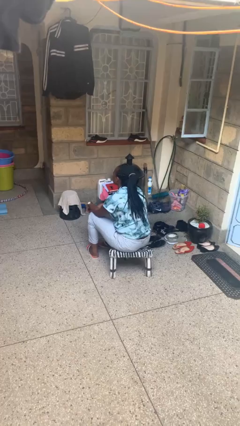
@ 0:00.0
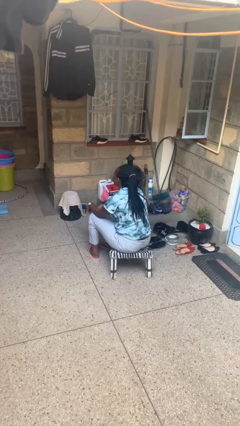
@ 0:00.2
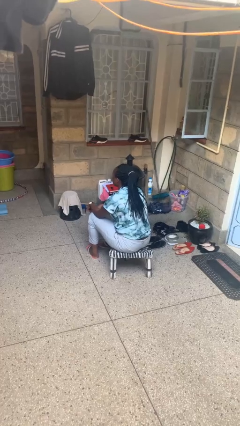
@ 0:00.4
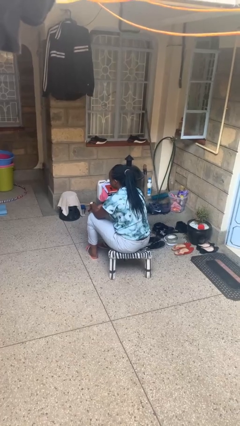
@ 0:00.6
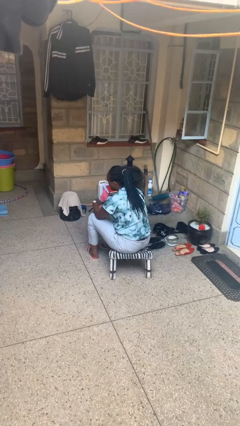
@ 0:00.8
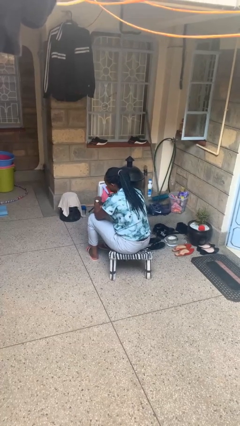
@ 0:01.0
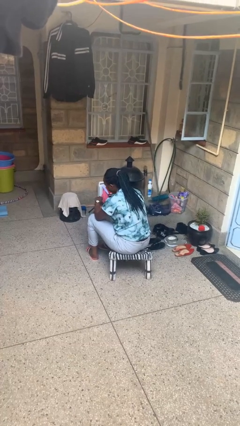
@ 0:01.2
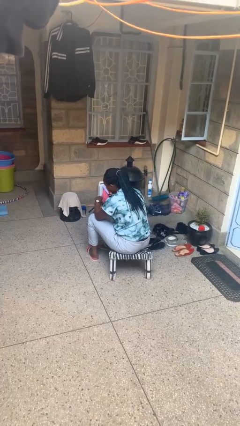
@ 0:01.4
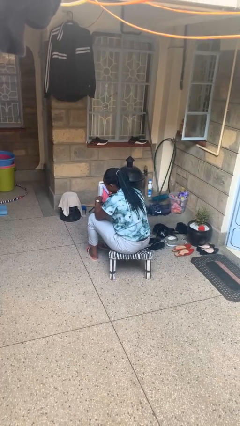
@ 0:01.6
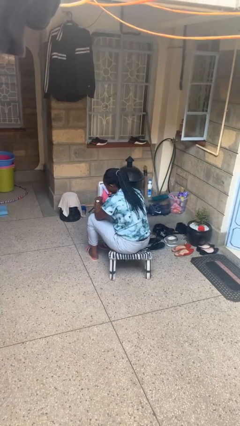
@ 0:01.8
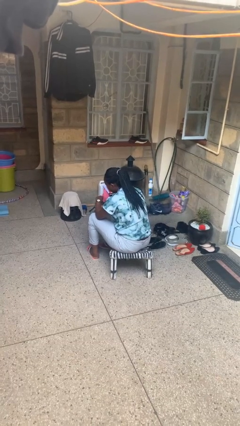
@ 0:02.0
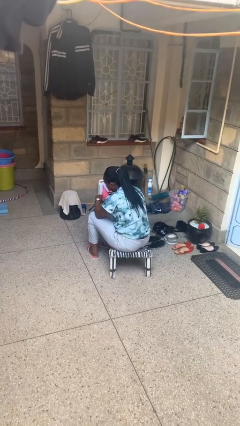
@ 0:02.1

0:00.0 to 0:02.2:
person looks at wristwatch

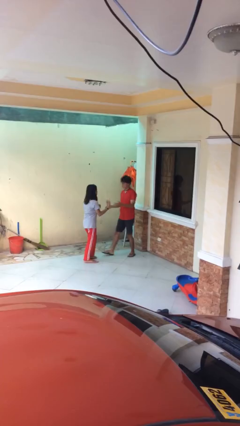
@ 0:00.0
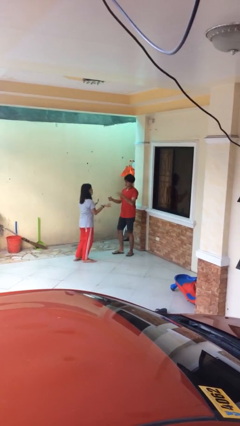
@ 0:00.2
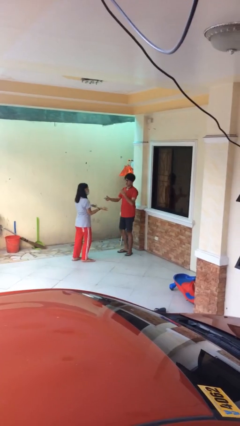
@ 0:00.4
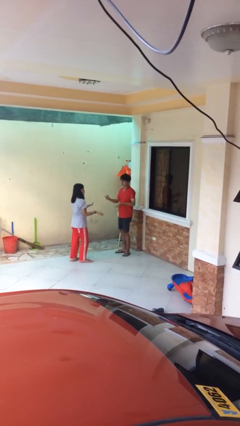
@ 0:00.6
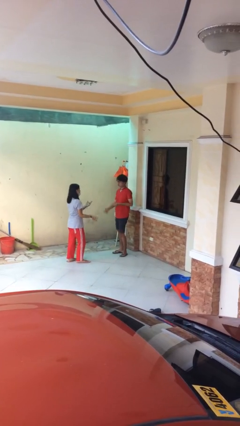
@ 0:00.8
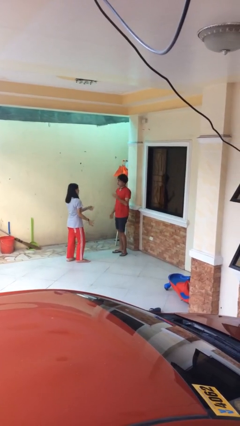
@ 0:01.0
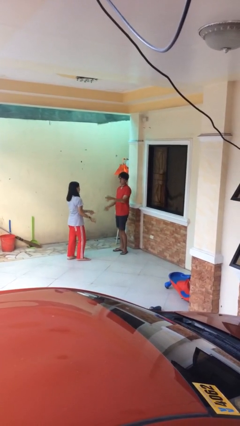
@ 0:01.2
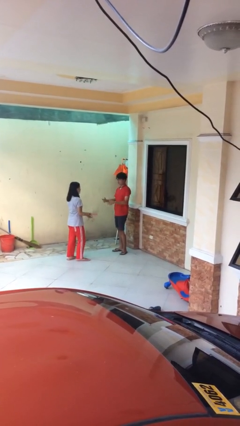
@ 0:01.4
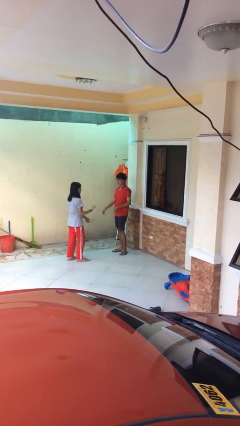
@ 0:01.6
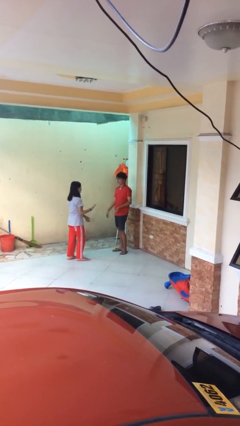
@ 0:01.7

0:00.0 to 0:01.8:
person talks to person

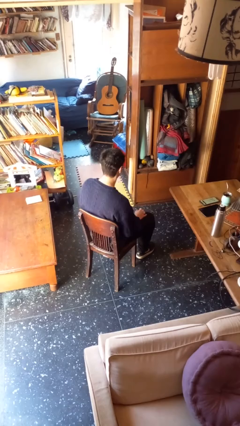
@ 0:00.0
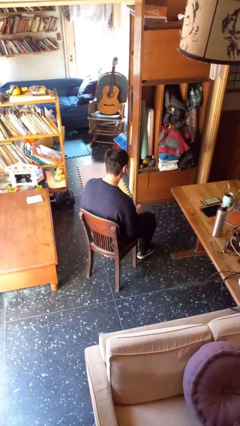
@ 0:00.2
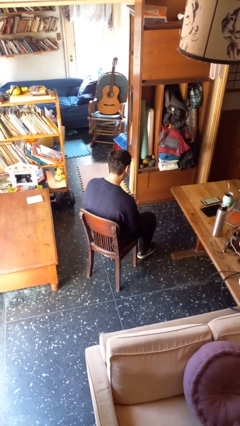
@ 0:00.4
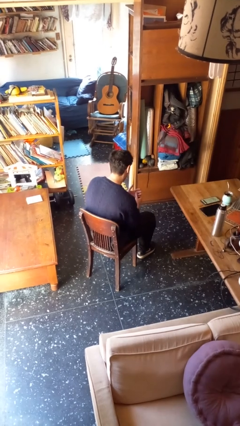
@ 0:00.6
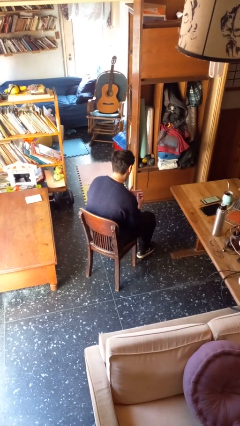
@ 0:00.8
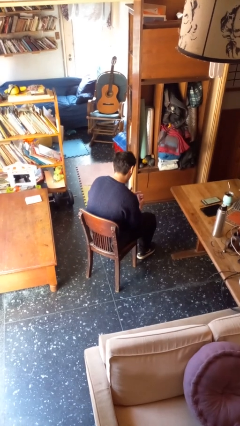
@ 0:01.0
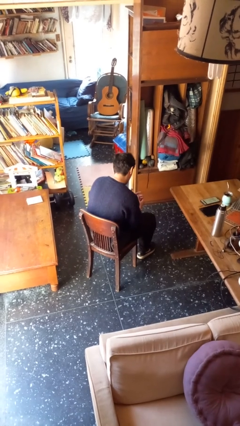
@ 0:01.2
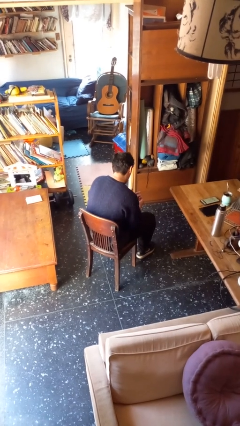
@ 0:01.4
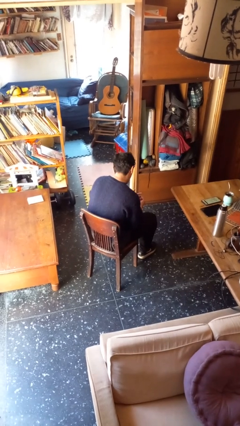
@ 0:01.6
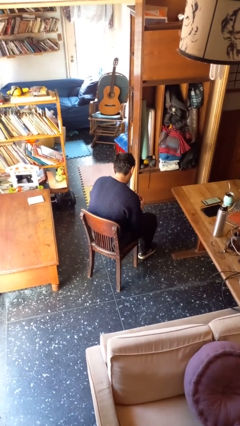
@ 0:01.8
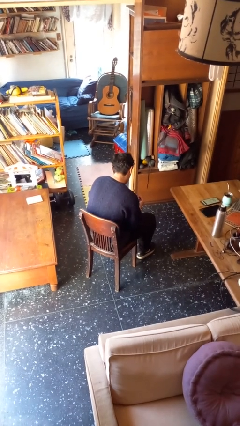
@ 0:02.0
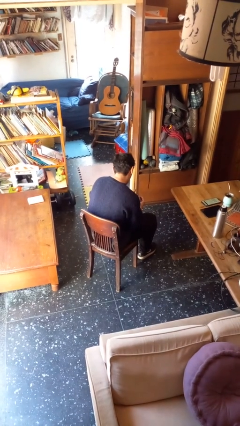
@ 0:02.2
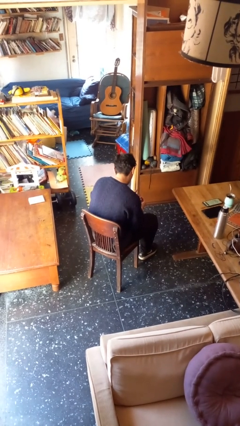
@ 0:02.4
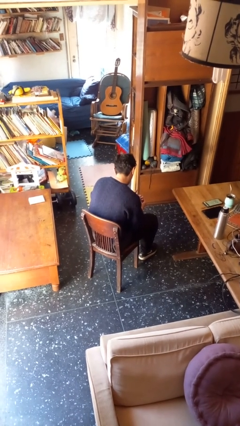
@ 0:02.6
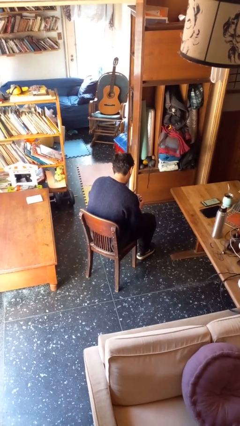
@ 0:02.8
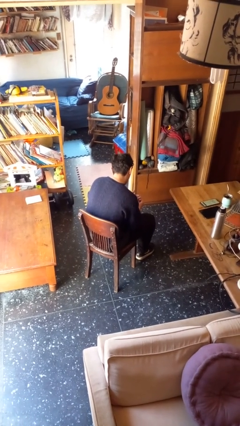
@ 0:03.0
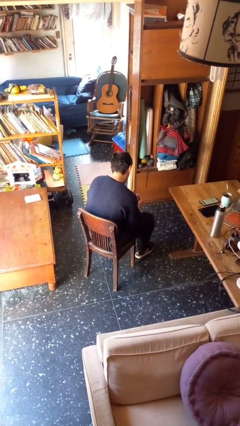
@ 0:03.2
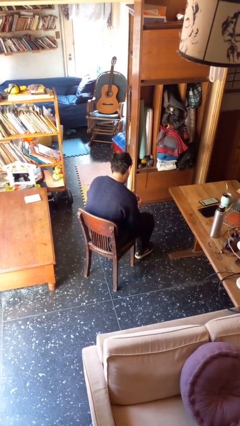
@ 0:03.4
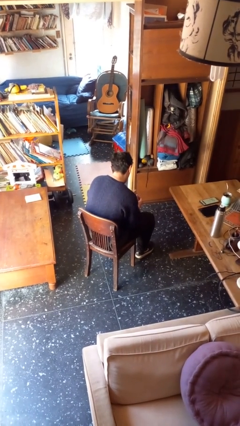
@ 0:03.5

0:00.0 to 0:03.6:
person looks at hands in lap

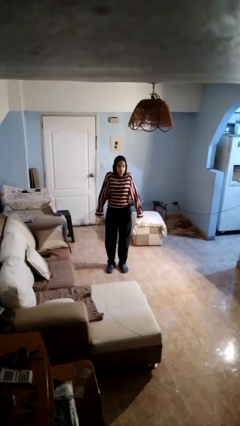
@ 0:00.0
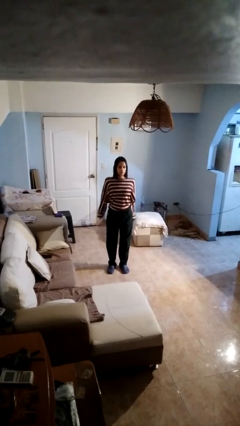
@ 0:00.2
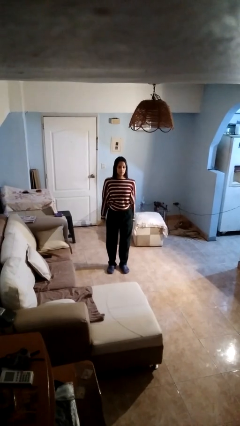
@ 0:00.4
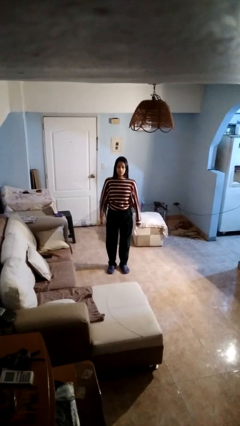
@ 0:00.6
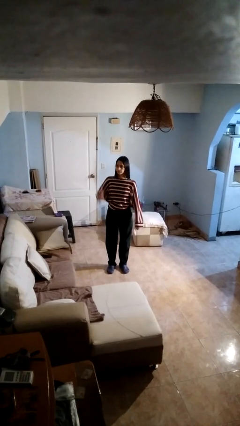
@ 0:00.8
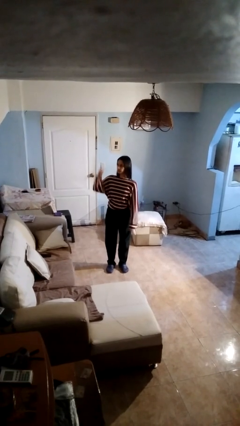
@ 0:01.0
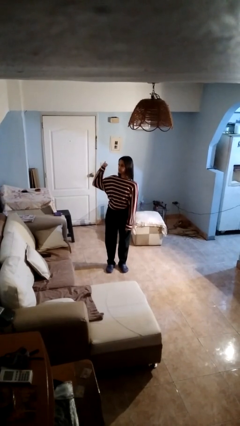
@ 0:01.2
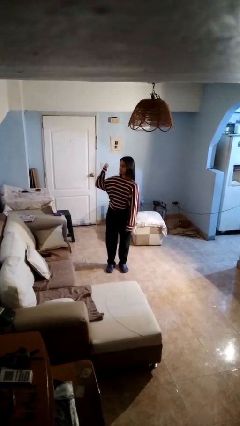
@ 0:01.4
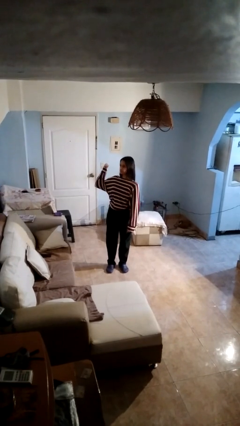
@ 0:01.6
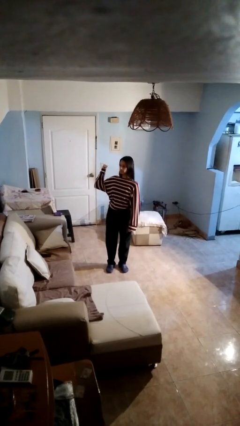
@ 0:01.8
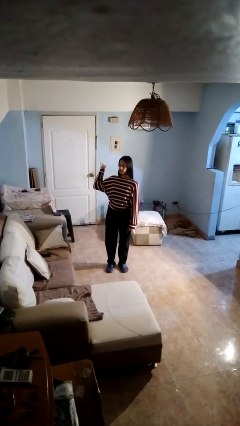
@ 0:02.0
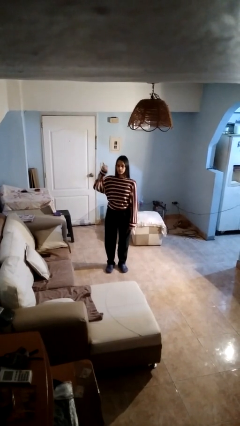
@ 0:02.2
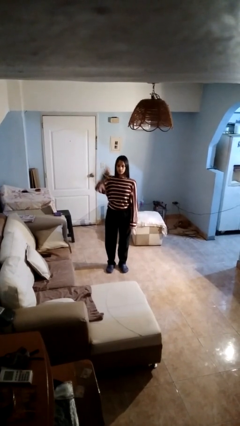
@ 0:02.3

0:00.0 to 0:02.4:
person gestures behind me

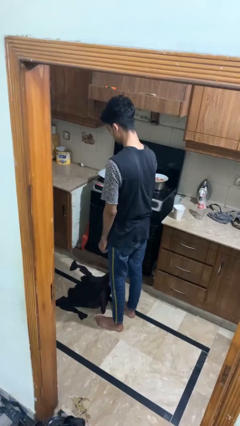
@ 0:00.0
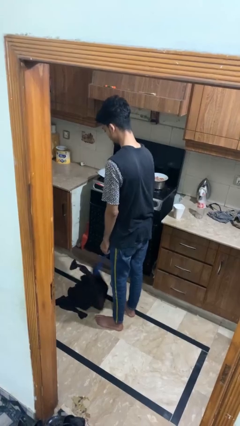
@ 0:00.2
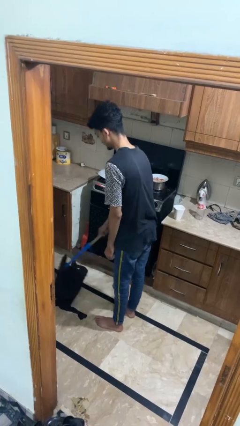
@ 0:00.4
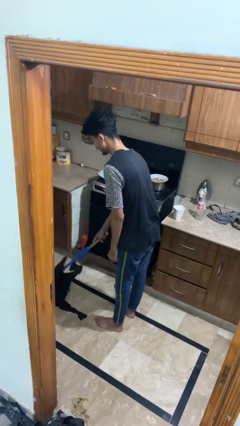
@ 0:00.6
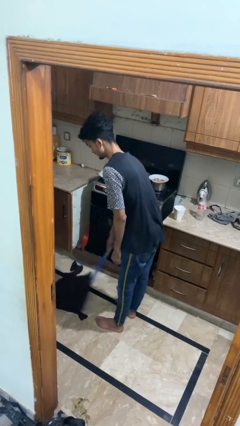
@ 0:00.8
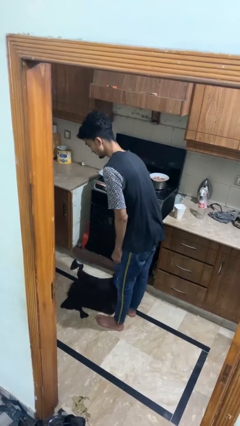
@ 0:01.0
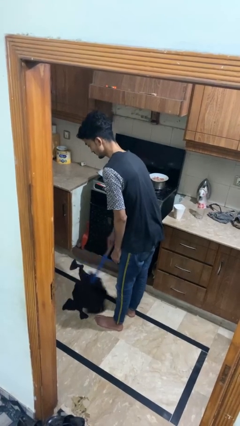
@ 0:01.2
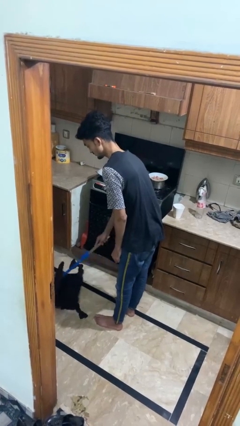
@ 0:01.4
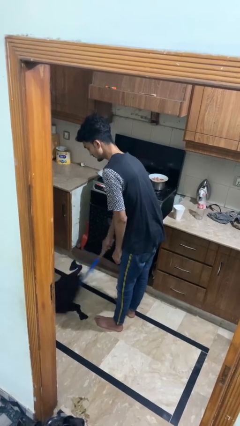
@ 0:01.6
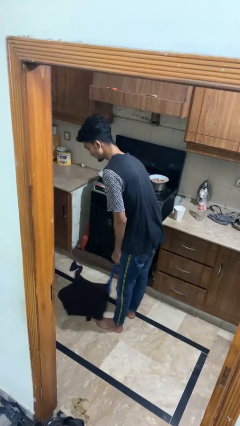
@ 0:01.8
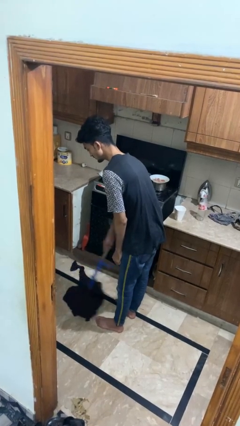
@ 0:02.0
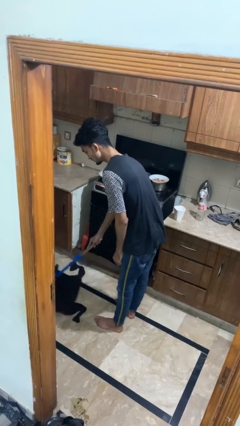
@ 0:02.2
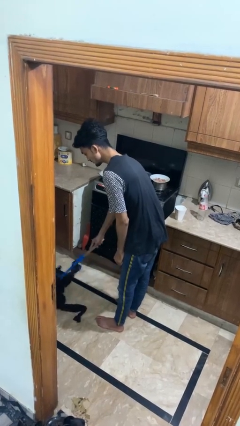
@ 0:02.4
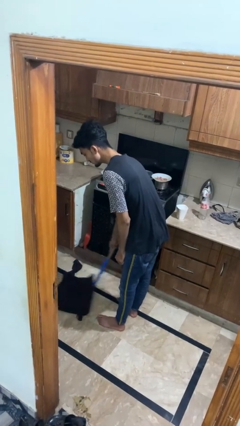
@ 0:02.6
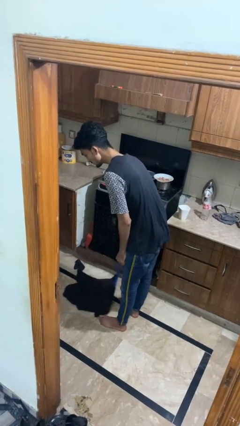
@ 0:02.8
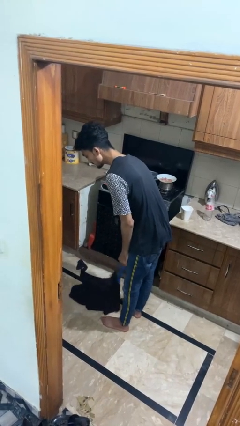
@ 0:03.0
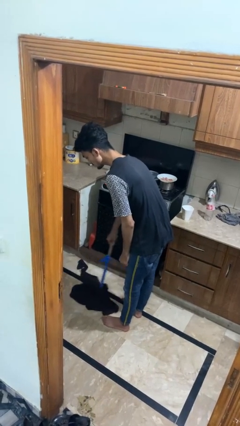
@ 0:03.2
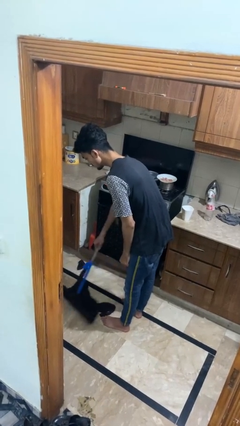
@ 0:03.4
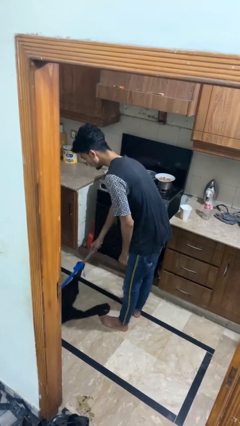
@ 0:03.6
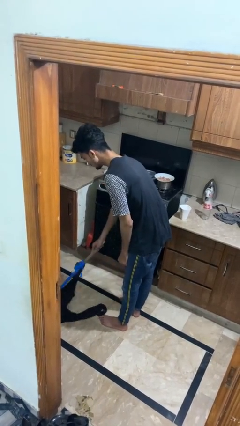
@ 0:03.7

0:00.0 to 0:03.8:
person mops

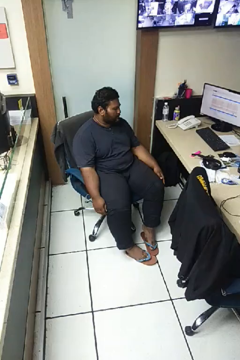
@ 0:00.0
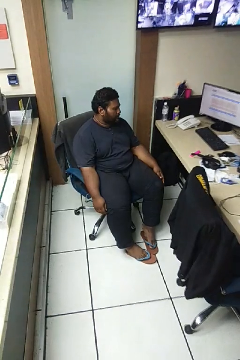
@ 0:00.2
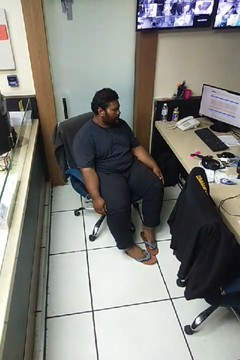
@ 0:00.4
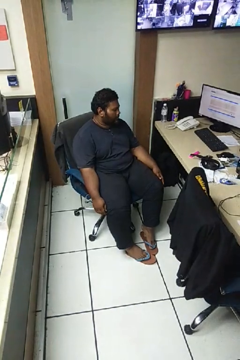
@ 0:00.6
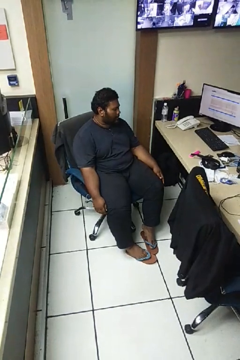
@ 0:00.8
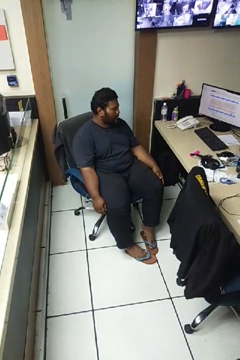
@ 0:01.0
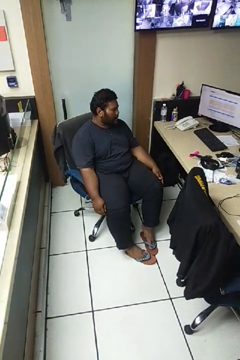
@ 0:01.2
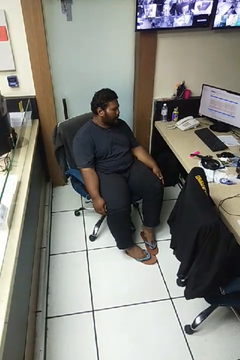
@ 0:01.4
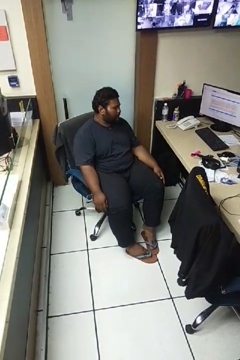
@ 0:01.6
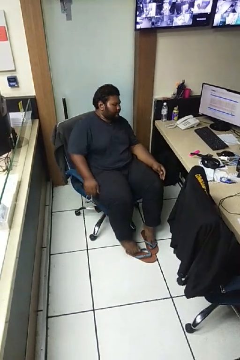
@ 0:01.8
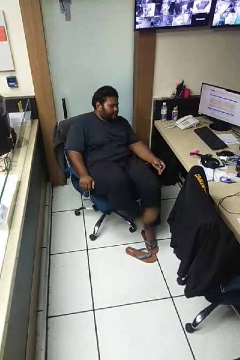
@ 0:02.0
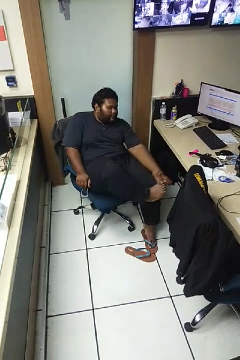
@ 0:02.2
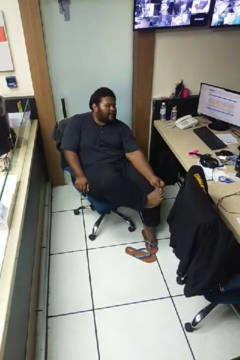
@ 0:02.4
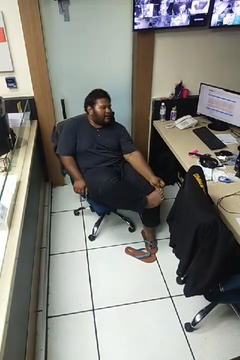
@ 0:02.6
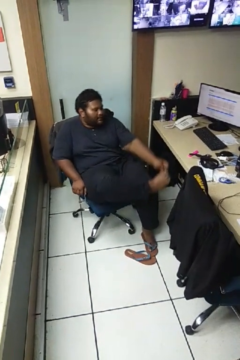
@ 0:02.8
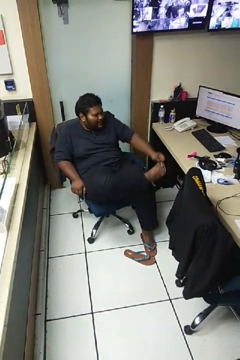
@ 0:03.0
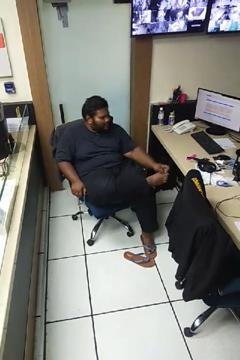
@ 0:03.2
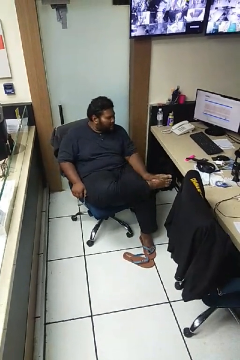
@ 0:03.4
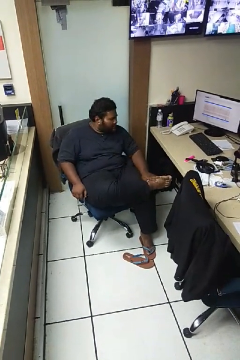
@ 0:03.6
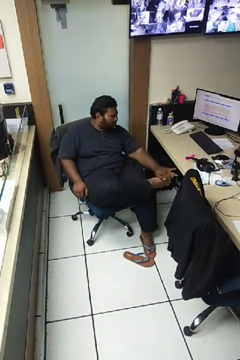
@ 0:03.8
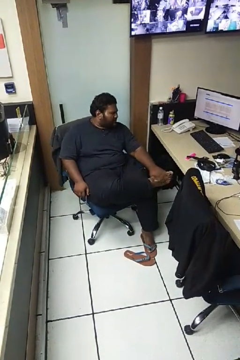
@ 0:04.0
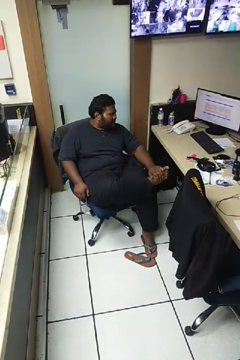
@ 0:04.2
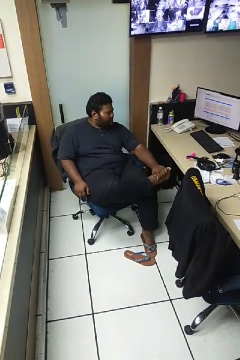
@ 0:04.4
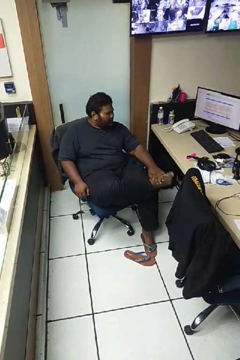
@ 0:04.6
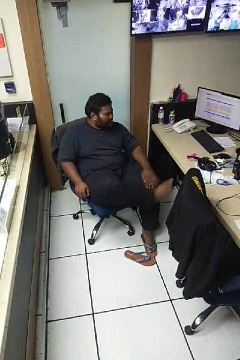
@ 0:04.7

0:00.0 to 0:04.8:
person rubs foot
